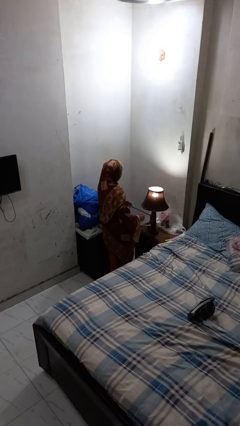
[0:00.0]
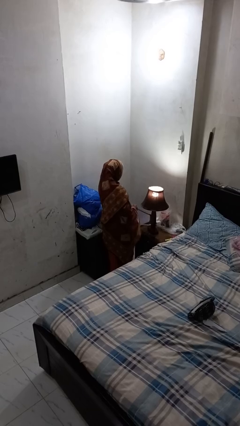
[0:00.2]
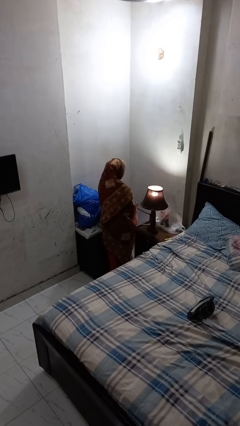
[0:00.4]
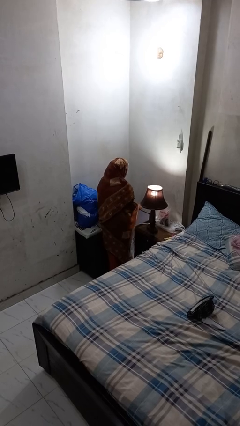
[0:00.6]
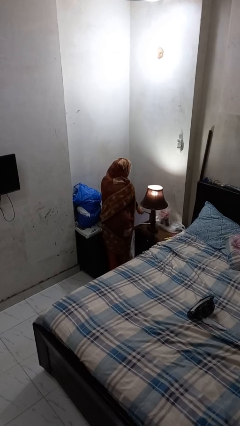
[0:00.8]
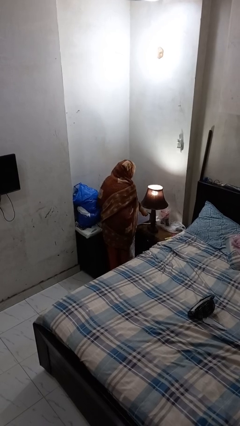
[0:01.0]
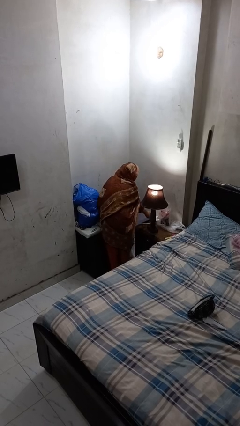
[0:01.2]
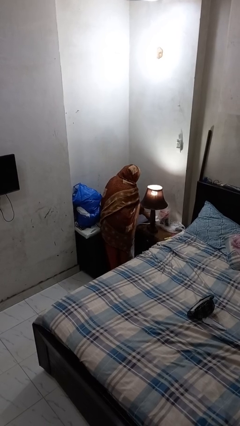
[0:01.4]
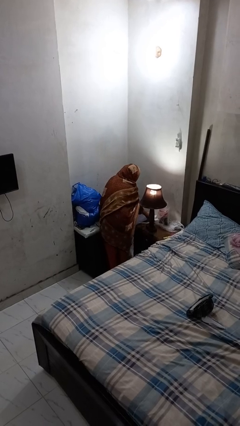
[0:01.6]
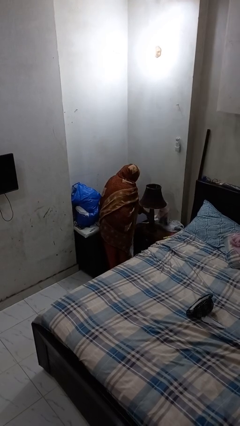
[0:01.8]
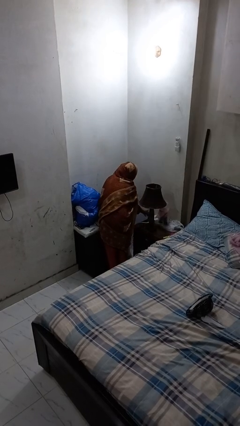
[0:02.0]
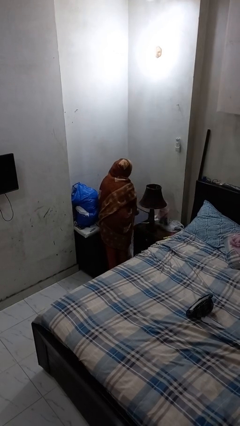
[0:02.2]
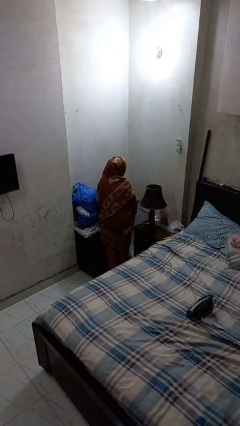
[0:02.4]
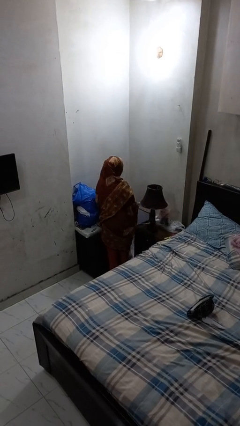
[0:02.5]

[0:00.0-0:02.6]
person turns off lamp

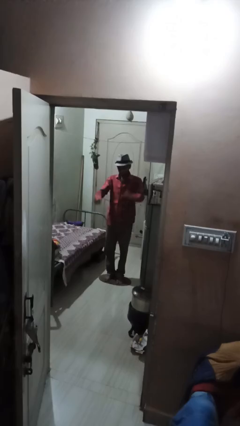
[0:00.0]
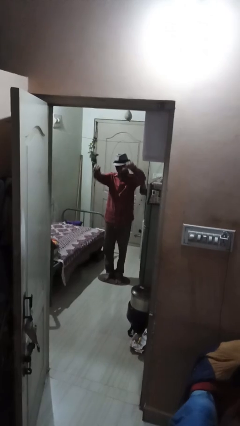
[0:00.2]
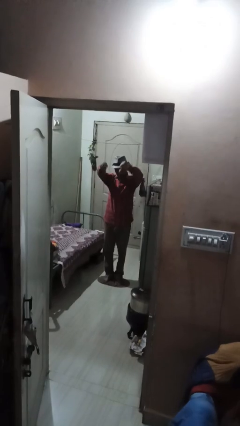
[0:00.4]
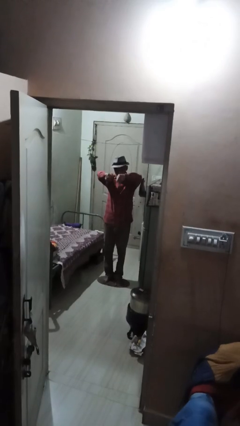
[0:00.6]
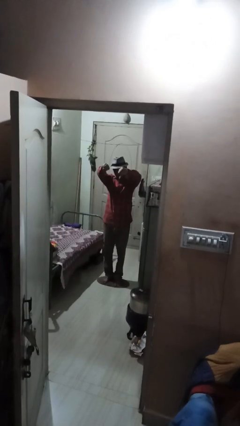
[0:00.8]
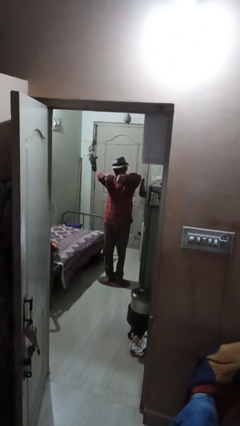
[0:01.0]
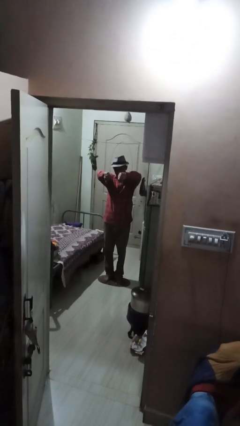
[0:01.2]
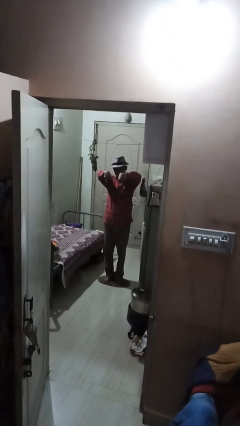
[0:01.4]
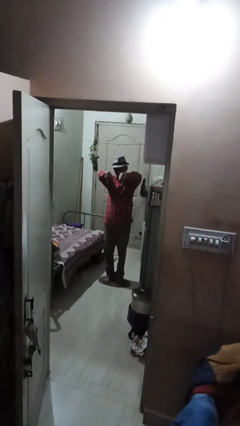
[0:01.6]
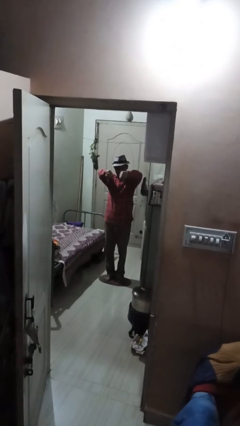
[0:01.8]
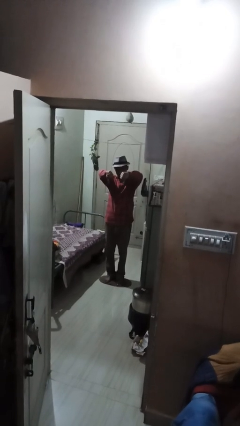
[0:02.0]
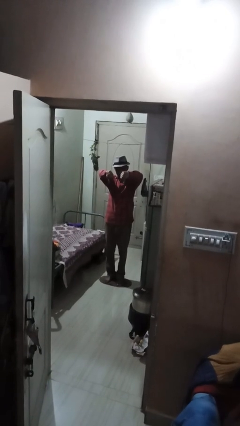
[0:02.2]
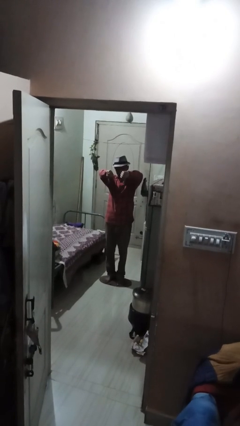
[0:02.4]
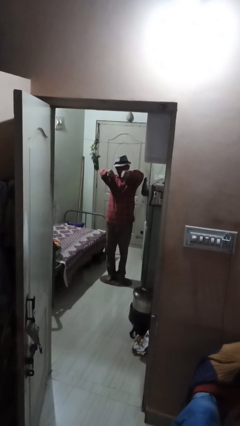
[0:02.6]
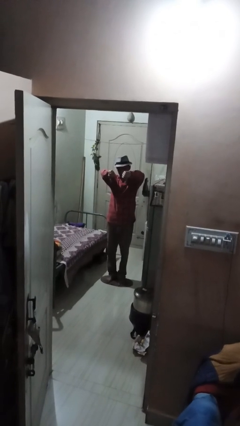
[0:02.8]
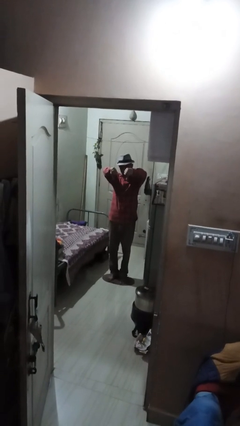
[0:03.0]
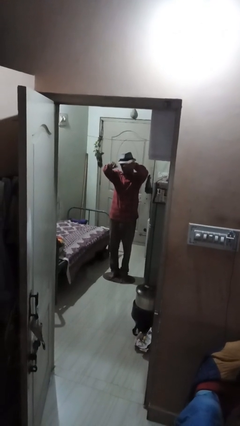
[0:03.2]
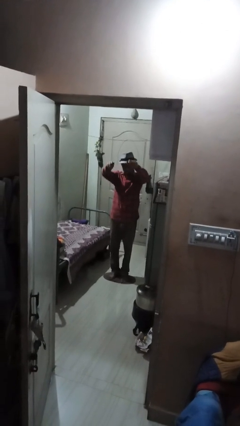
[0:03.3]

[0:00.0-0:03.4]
person gestures thumbs down

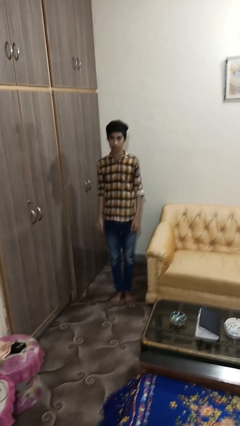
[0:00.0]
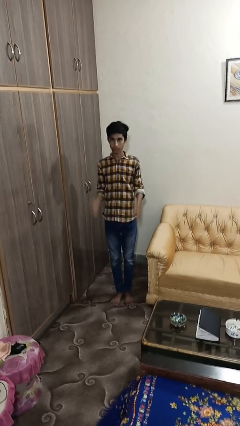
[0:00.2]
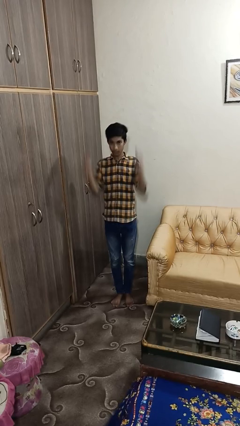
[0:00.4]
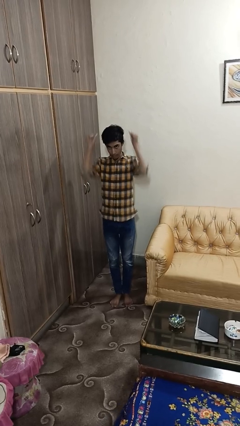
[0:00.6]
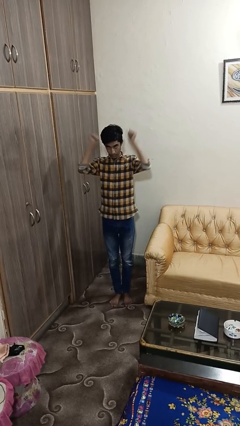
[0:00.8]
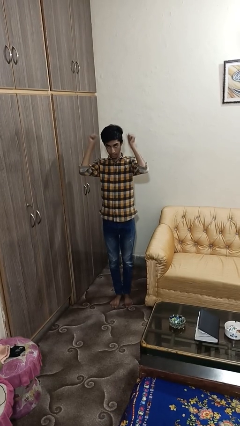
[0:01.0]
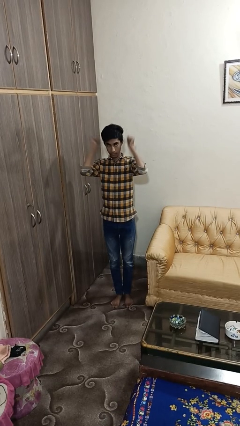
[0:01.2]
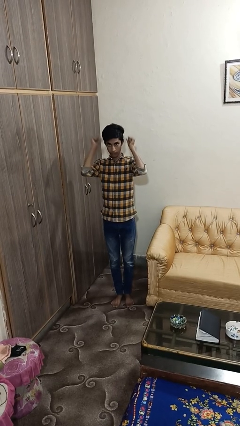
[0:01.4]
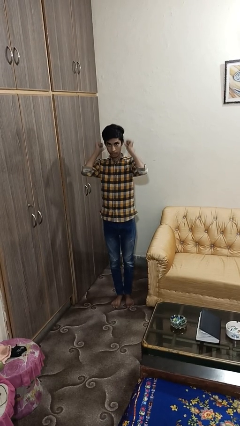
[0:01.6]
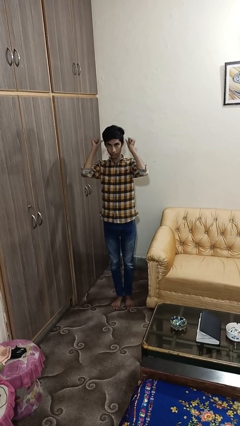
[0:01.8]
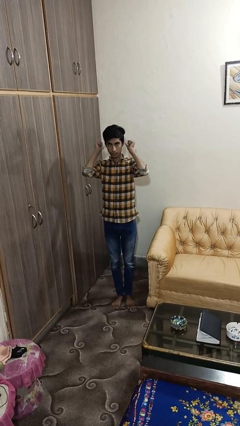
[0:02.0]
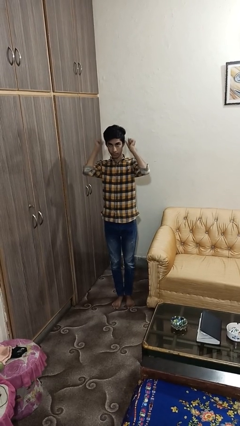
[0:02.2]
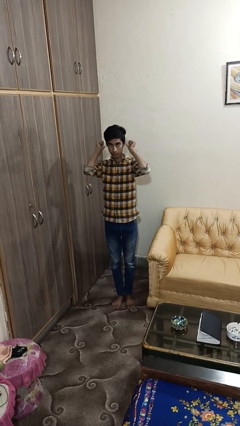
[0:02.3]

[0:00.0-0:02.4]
person gestures behind me

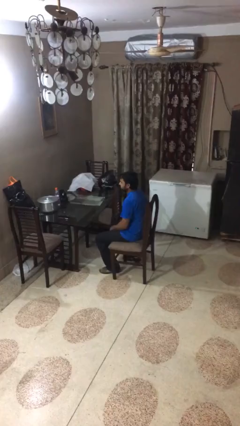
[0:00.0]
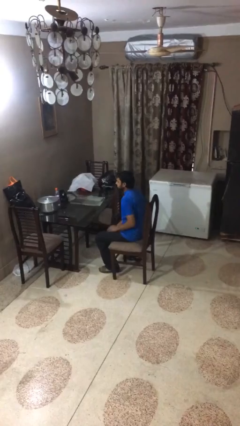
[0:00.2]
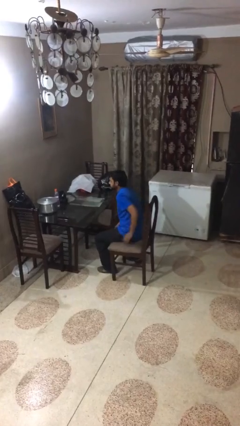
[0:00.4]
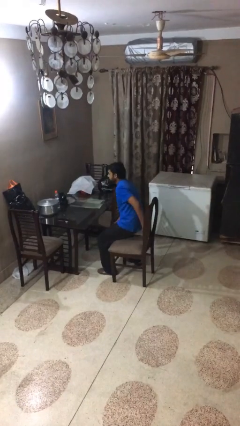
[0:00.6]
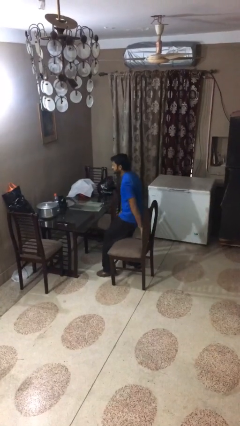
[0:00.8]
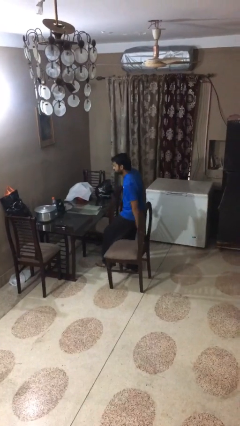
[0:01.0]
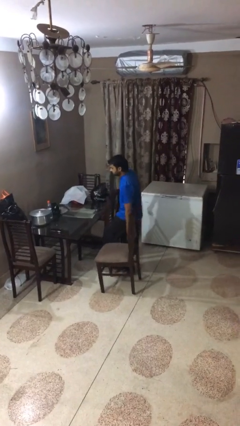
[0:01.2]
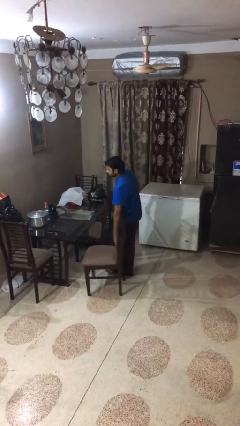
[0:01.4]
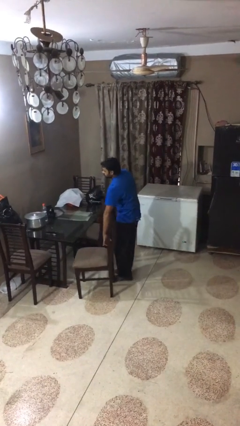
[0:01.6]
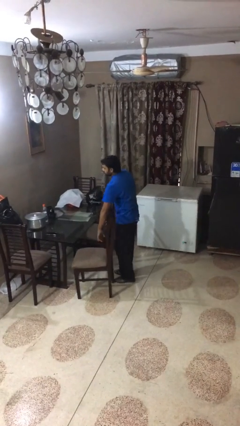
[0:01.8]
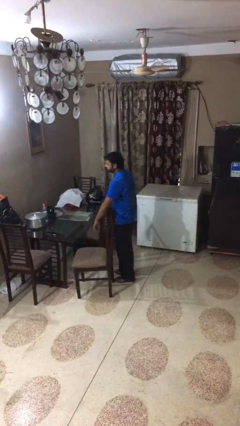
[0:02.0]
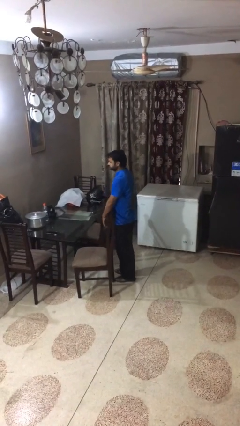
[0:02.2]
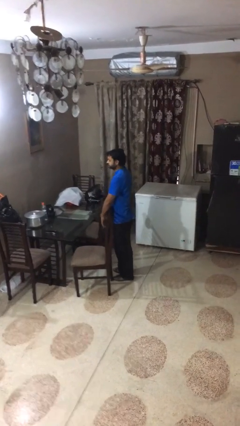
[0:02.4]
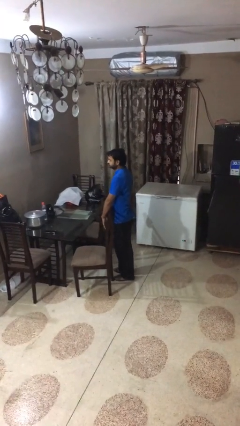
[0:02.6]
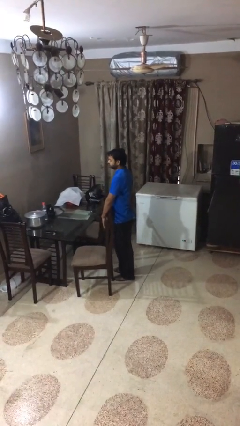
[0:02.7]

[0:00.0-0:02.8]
person stands up

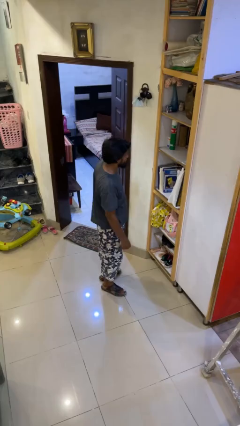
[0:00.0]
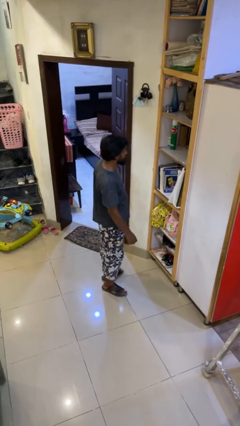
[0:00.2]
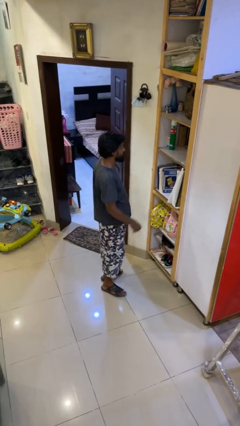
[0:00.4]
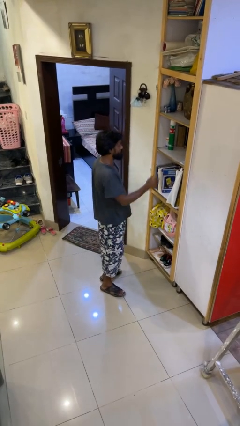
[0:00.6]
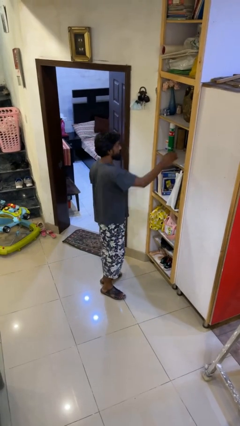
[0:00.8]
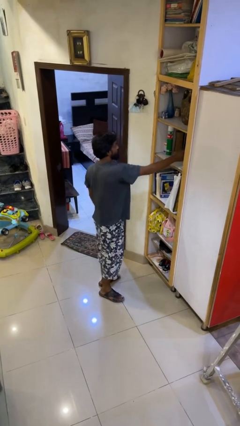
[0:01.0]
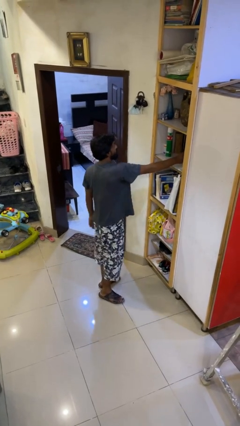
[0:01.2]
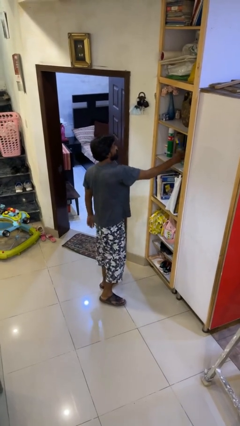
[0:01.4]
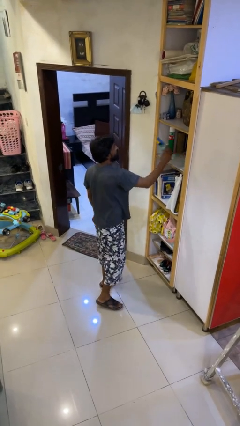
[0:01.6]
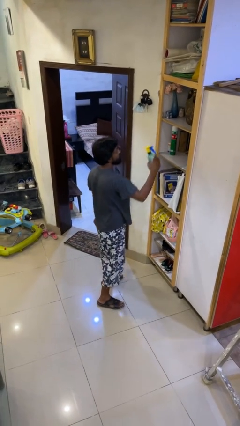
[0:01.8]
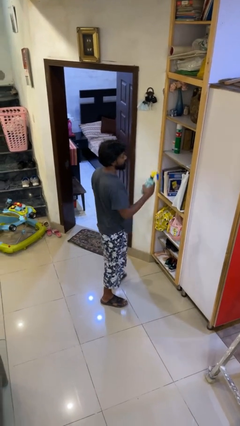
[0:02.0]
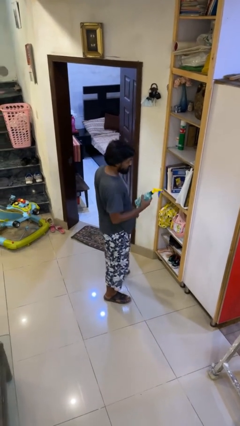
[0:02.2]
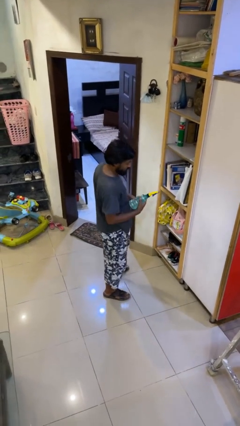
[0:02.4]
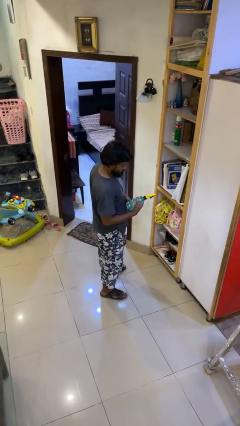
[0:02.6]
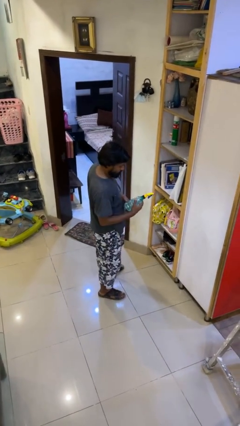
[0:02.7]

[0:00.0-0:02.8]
person picks up object from cabinet

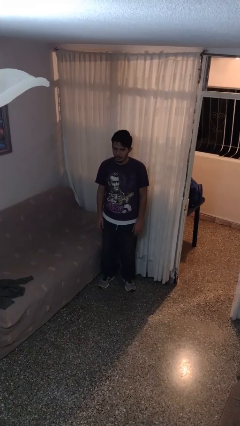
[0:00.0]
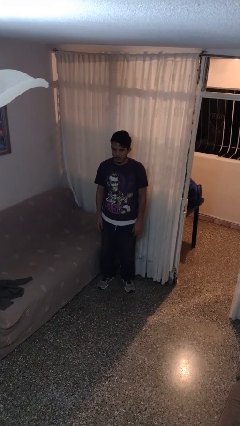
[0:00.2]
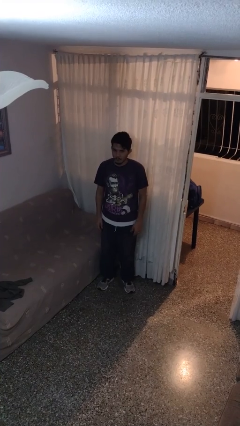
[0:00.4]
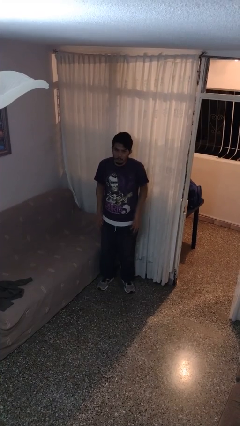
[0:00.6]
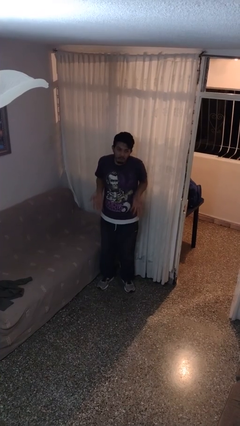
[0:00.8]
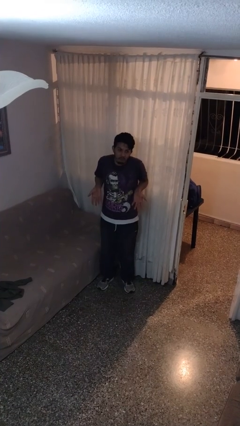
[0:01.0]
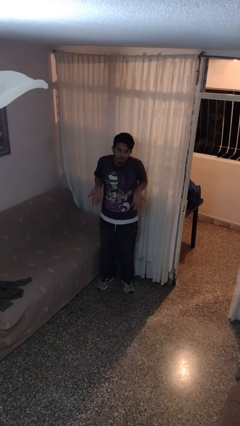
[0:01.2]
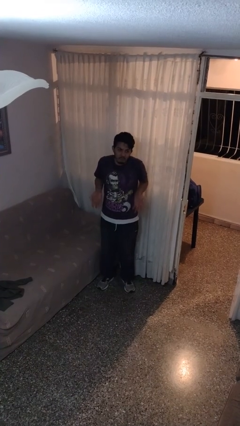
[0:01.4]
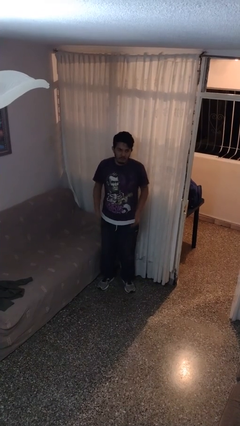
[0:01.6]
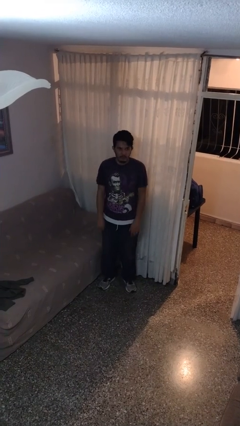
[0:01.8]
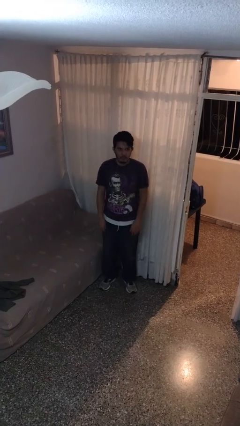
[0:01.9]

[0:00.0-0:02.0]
person shrugs

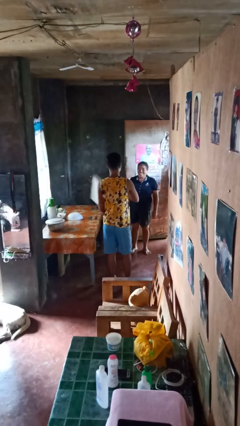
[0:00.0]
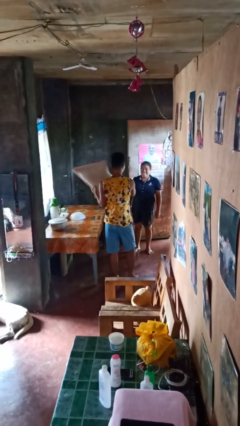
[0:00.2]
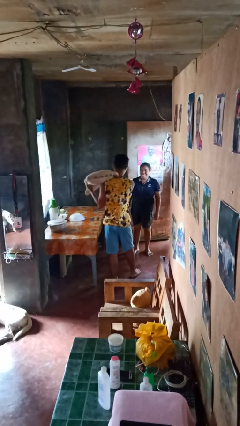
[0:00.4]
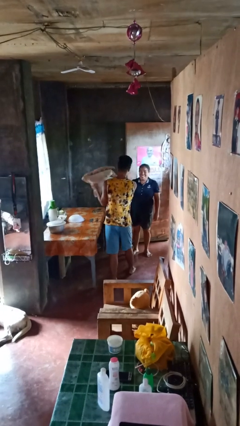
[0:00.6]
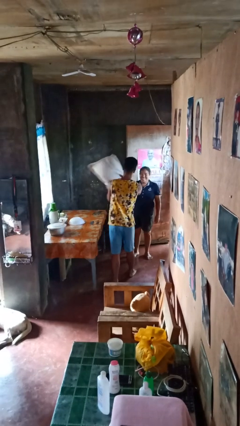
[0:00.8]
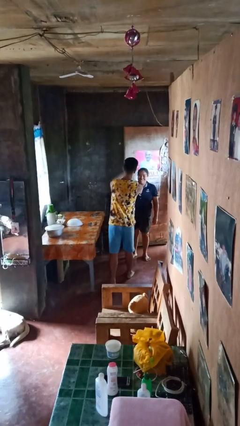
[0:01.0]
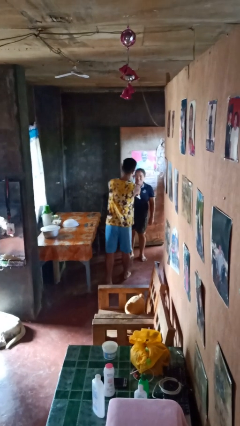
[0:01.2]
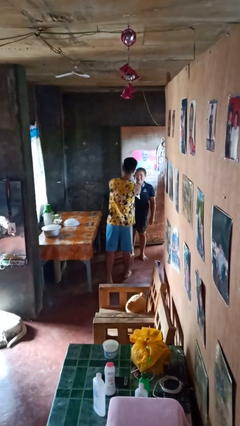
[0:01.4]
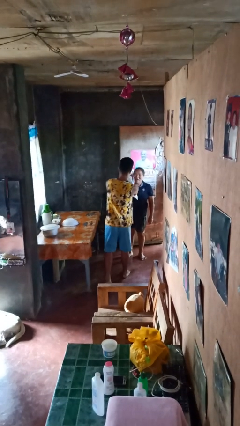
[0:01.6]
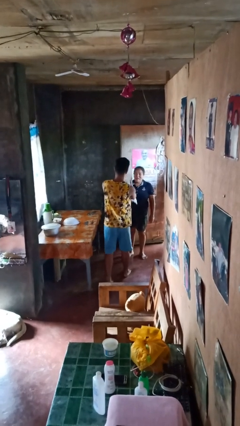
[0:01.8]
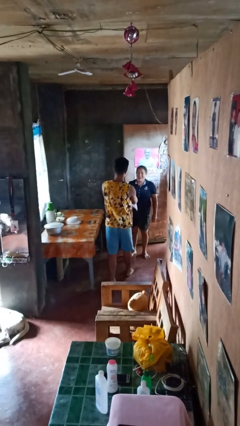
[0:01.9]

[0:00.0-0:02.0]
person hits person with pillow
